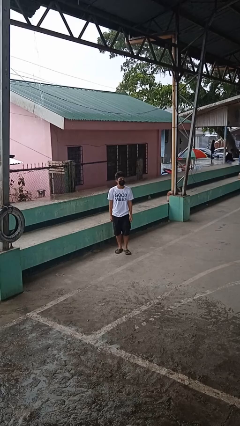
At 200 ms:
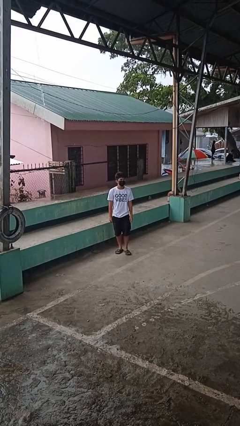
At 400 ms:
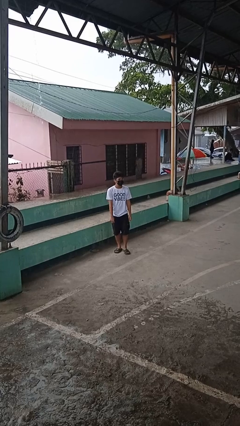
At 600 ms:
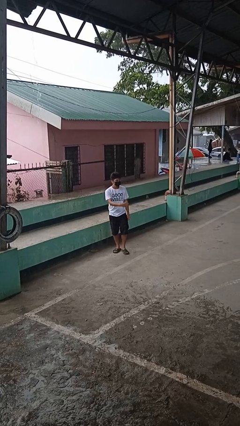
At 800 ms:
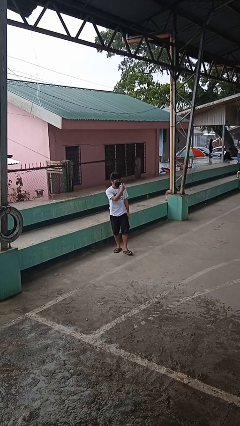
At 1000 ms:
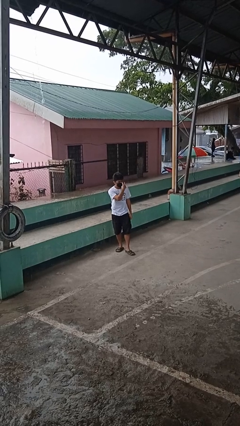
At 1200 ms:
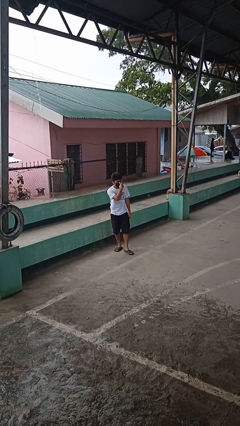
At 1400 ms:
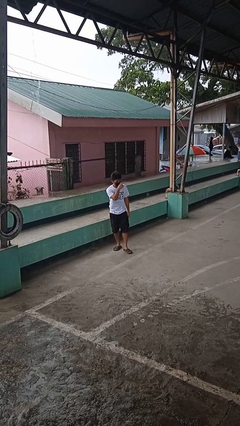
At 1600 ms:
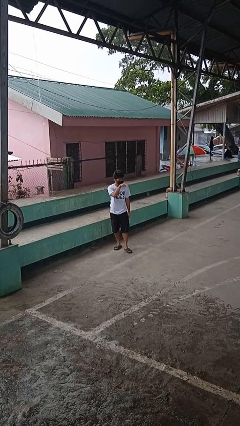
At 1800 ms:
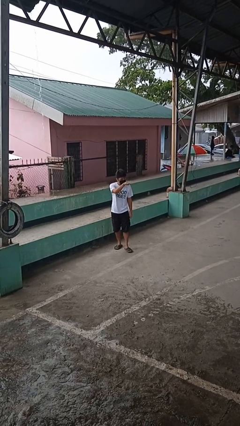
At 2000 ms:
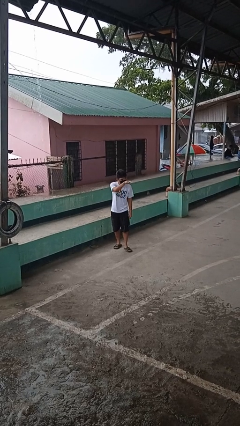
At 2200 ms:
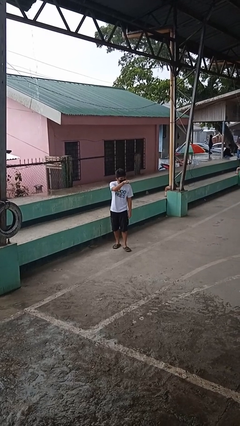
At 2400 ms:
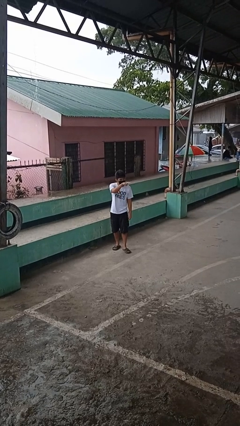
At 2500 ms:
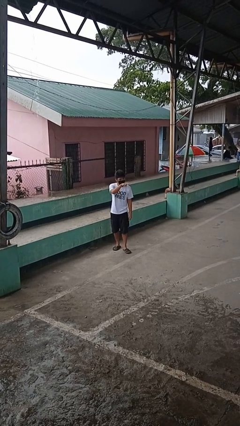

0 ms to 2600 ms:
person gestures watch closely

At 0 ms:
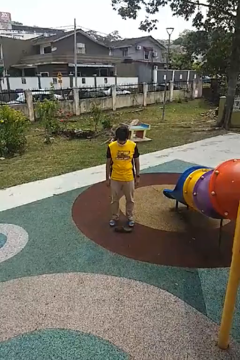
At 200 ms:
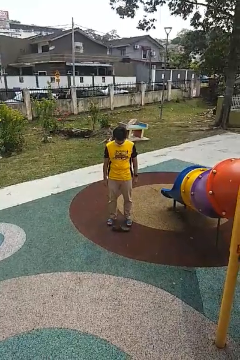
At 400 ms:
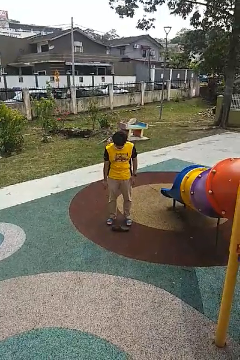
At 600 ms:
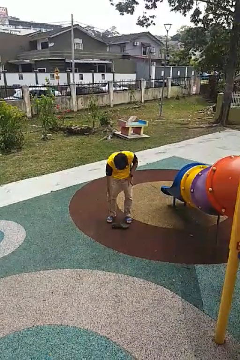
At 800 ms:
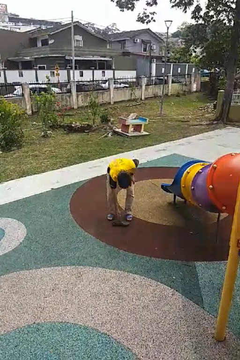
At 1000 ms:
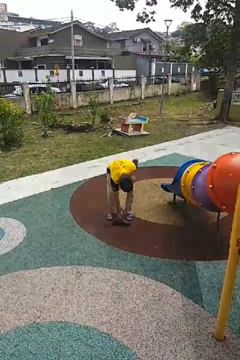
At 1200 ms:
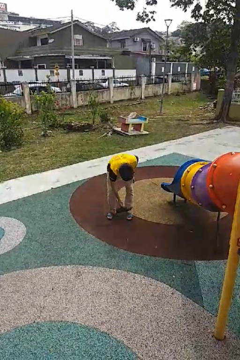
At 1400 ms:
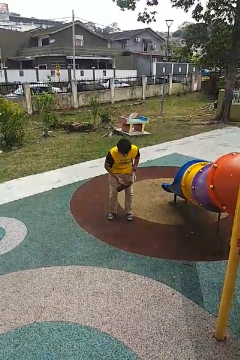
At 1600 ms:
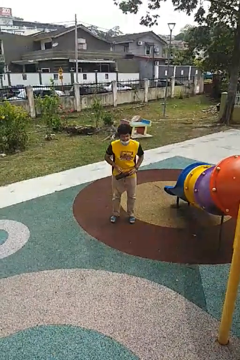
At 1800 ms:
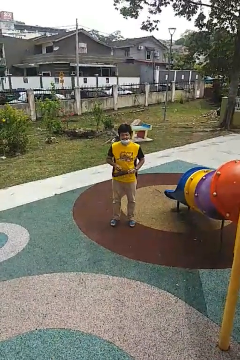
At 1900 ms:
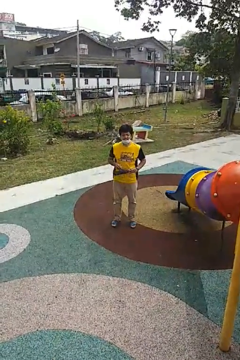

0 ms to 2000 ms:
person picks up object from floor

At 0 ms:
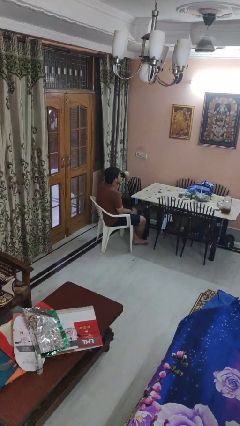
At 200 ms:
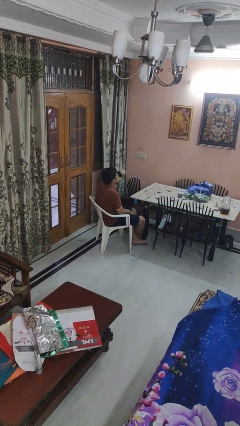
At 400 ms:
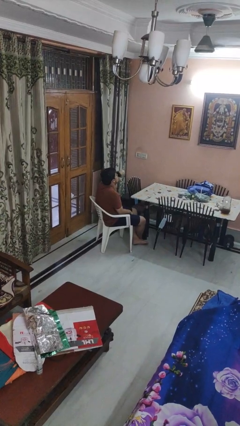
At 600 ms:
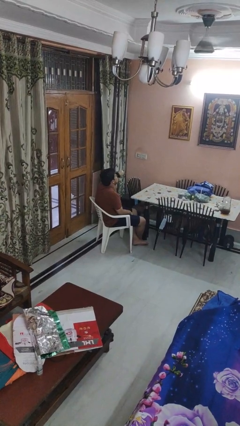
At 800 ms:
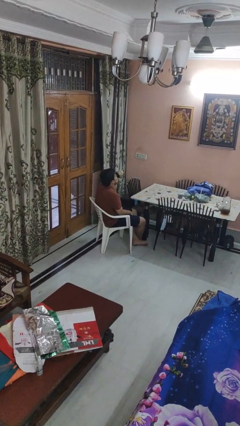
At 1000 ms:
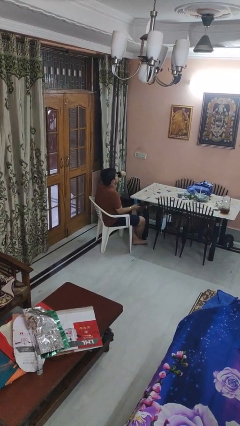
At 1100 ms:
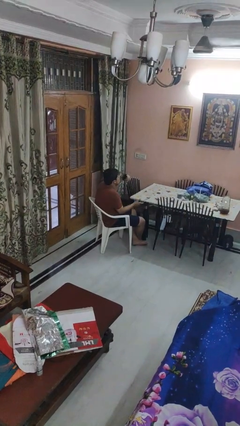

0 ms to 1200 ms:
person drinks from mug

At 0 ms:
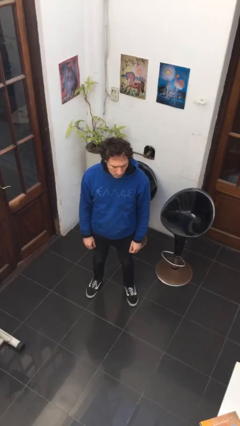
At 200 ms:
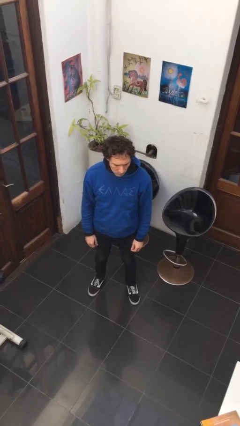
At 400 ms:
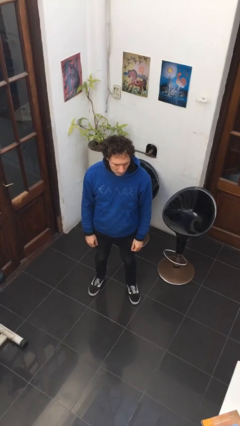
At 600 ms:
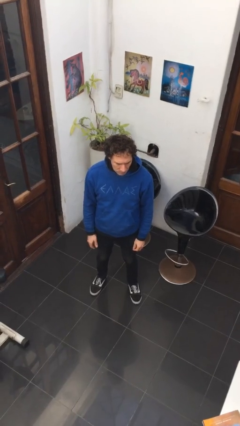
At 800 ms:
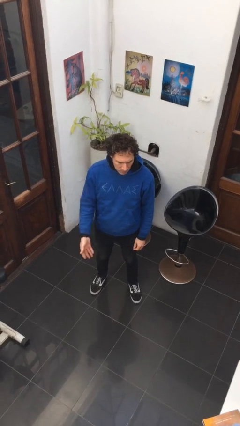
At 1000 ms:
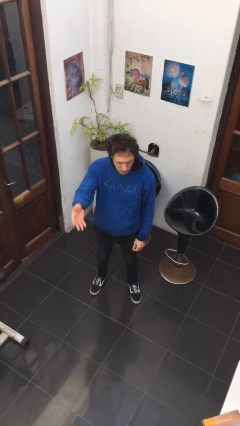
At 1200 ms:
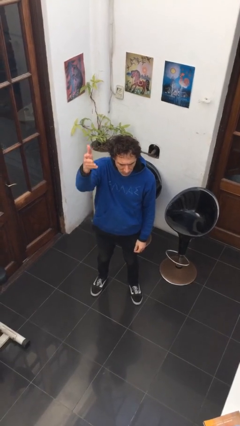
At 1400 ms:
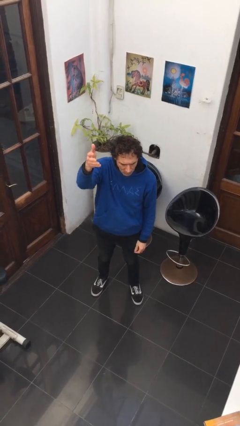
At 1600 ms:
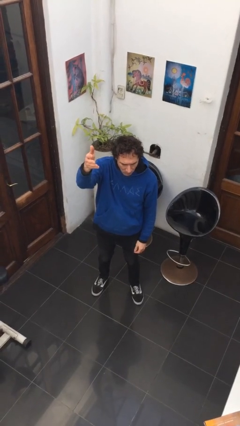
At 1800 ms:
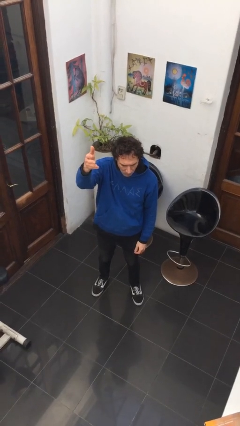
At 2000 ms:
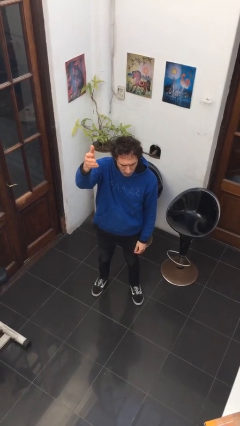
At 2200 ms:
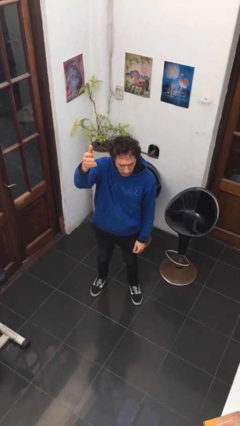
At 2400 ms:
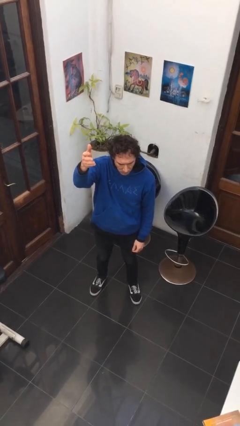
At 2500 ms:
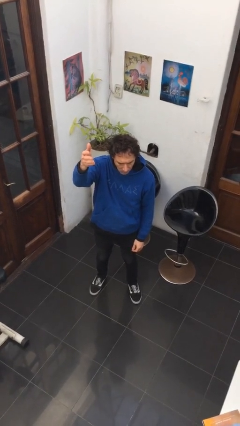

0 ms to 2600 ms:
person gestures swipe up

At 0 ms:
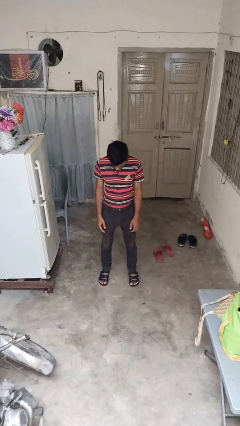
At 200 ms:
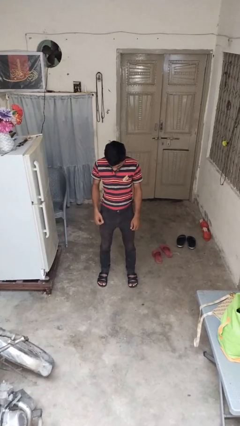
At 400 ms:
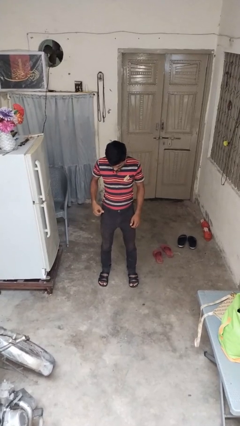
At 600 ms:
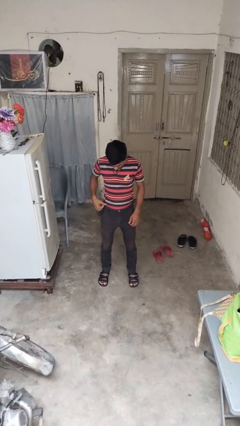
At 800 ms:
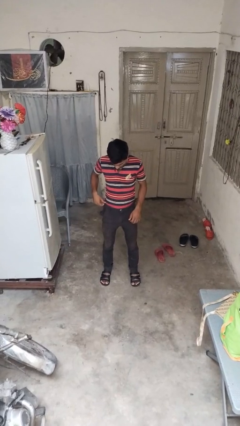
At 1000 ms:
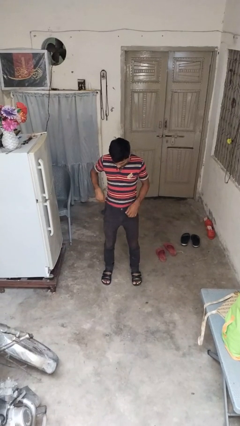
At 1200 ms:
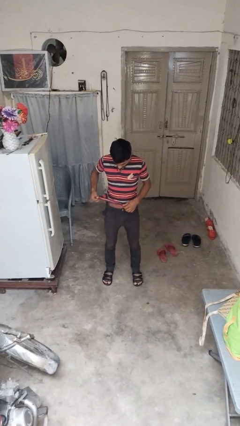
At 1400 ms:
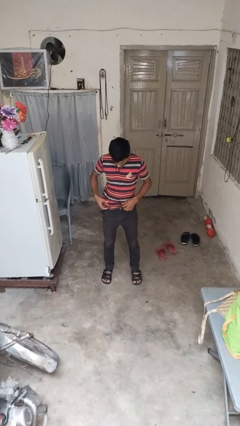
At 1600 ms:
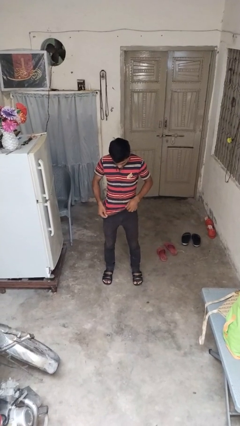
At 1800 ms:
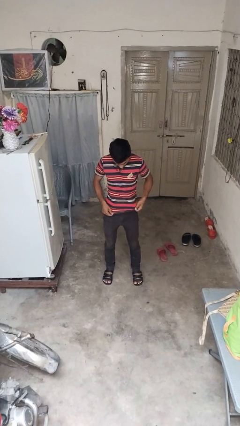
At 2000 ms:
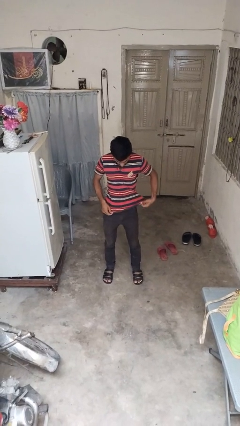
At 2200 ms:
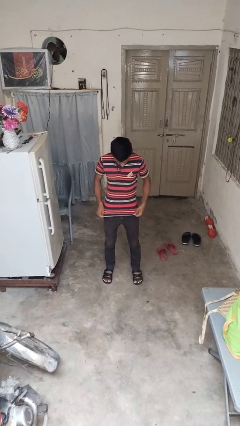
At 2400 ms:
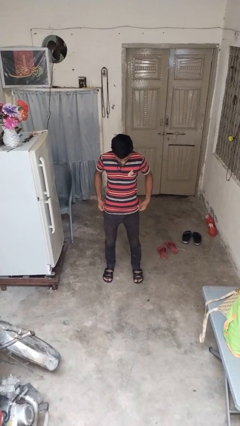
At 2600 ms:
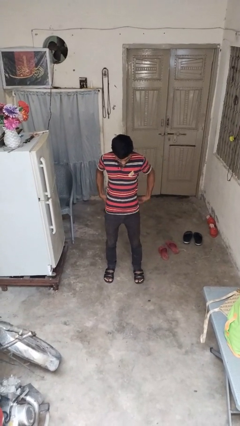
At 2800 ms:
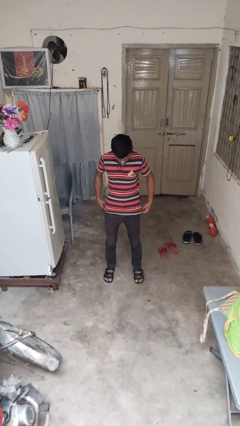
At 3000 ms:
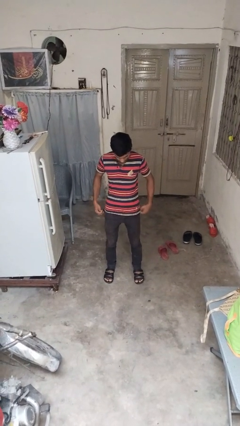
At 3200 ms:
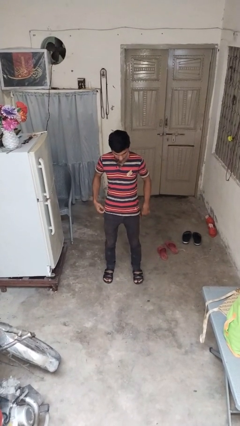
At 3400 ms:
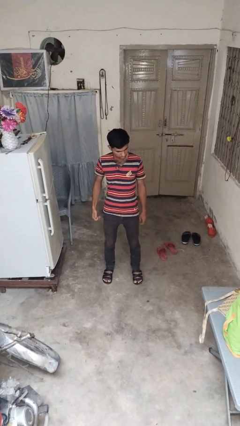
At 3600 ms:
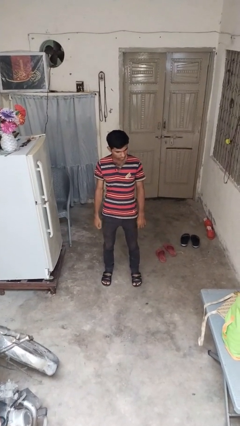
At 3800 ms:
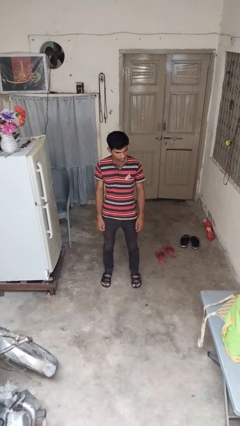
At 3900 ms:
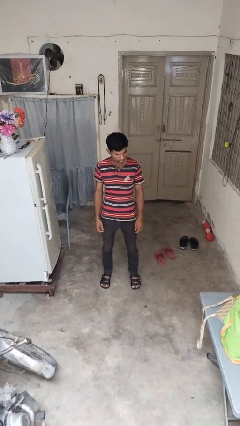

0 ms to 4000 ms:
person untucks shirt

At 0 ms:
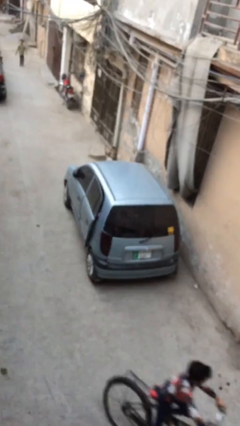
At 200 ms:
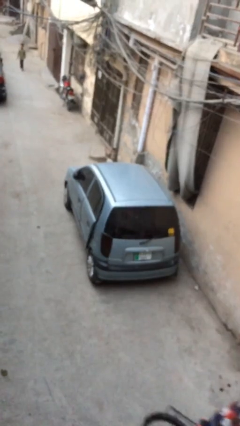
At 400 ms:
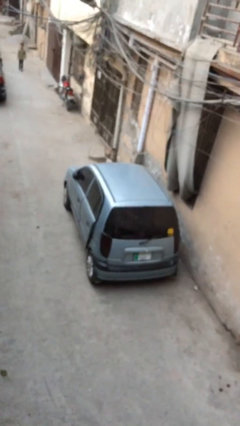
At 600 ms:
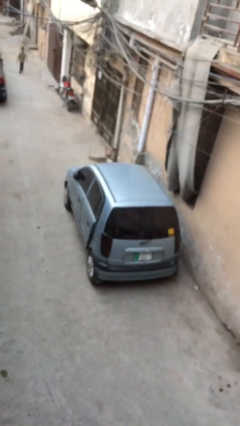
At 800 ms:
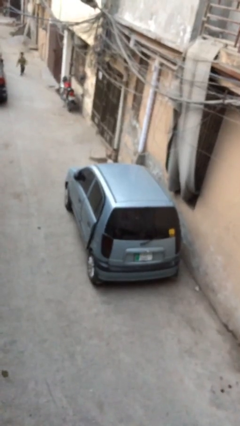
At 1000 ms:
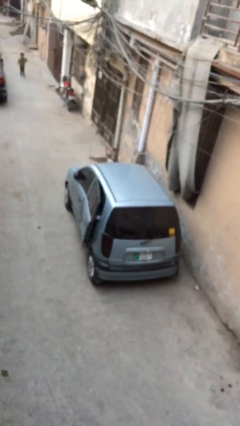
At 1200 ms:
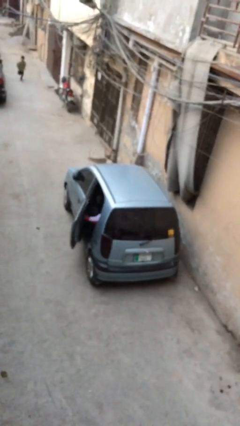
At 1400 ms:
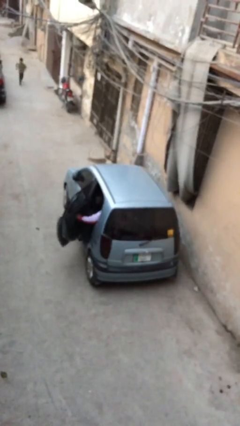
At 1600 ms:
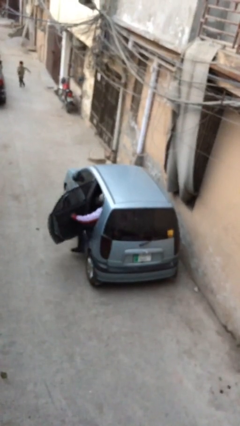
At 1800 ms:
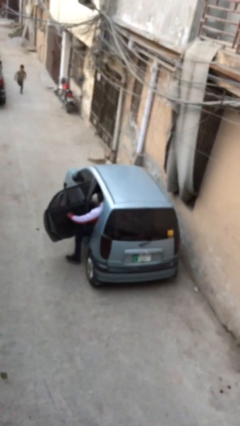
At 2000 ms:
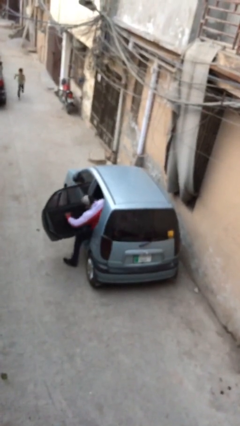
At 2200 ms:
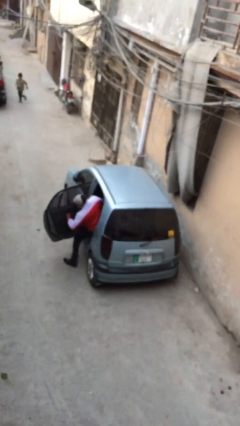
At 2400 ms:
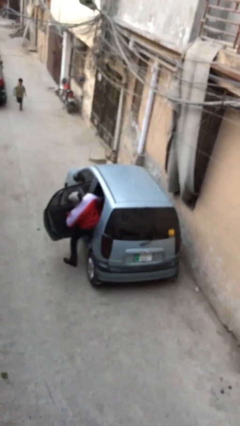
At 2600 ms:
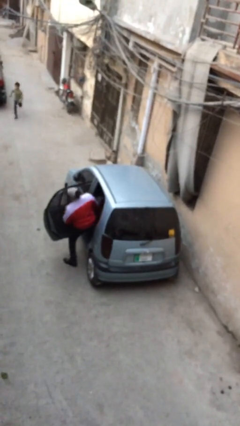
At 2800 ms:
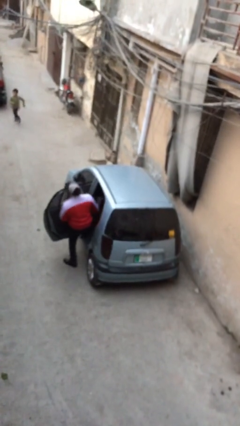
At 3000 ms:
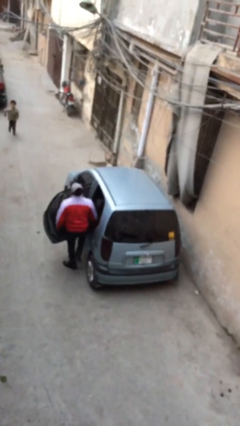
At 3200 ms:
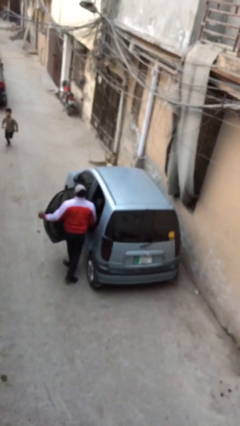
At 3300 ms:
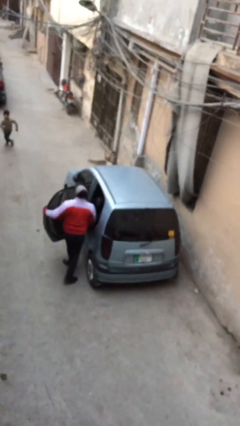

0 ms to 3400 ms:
car drops off person

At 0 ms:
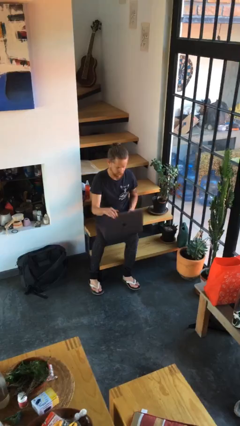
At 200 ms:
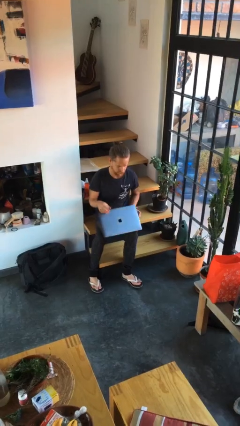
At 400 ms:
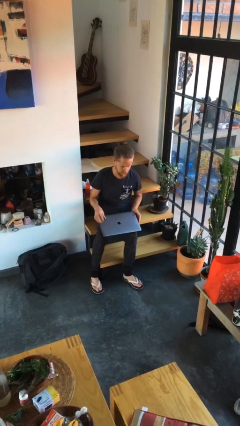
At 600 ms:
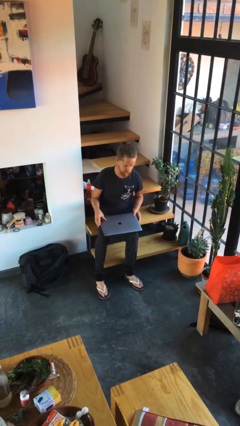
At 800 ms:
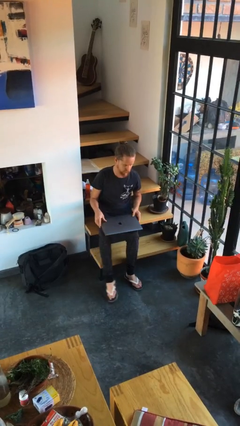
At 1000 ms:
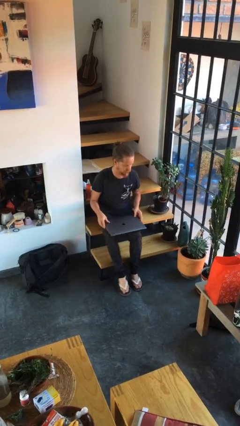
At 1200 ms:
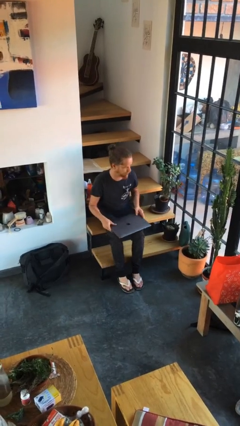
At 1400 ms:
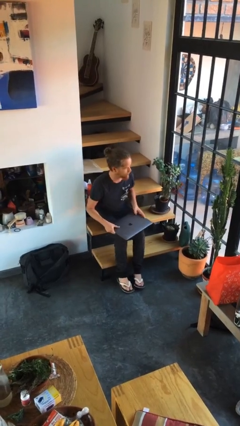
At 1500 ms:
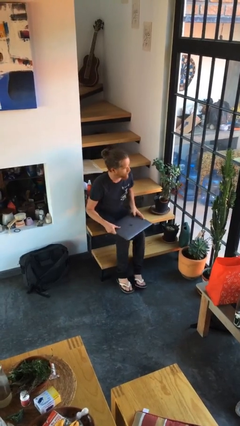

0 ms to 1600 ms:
person closes laptop
